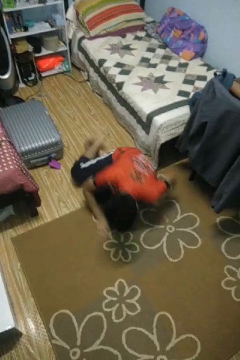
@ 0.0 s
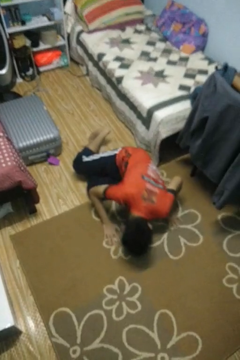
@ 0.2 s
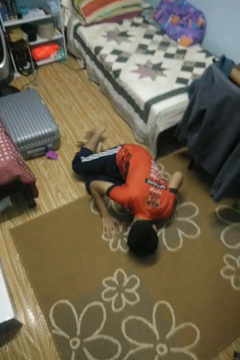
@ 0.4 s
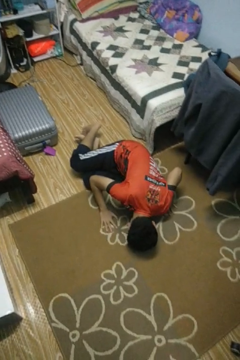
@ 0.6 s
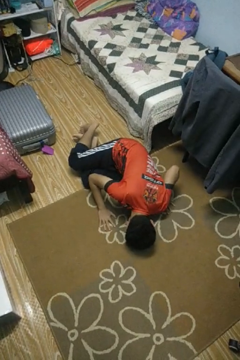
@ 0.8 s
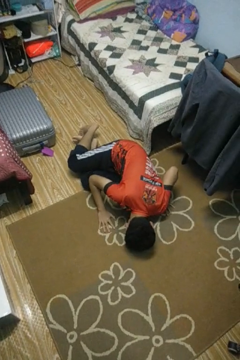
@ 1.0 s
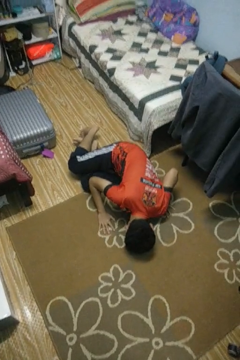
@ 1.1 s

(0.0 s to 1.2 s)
person lies down on floor

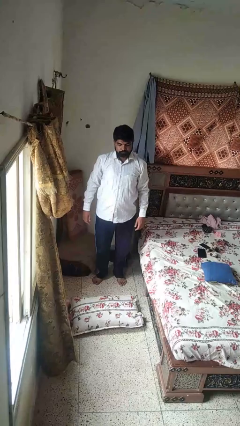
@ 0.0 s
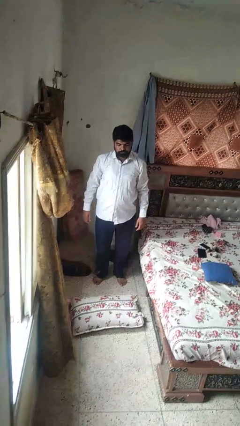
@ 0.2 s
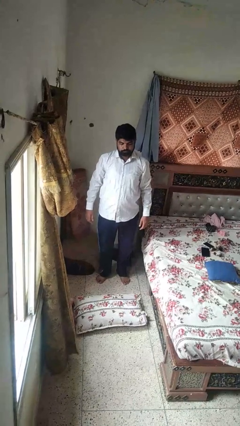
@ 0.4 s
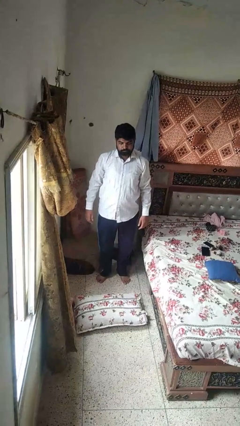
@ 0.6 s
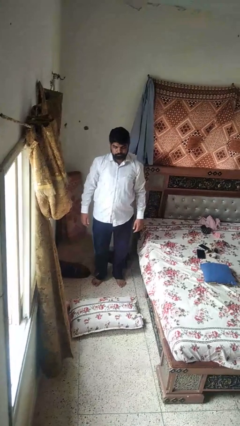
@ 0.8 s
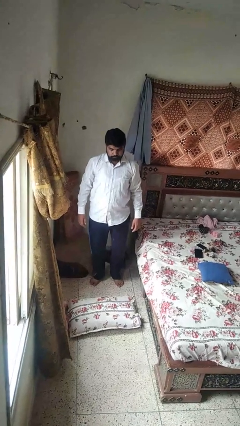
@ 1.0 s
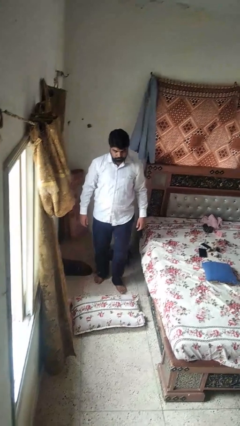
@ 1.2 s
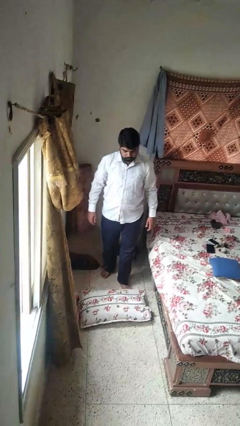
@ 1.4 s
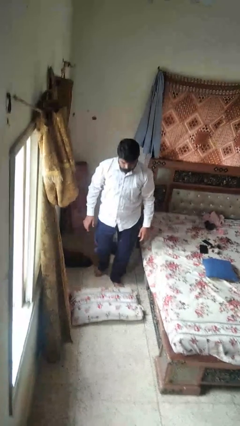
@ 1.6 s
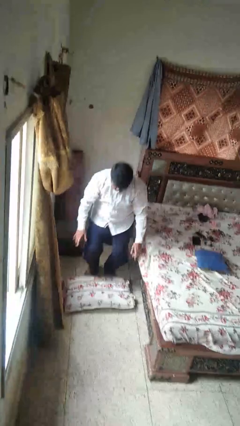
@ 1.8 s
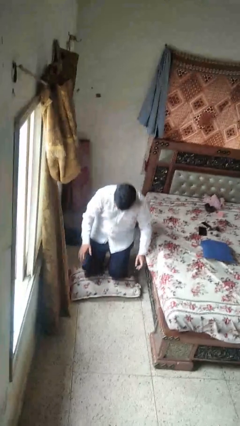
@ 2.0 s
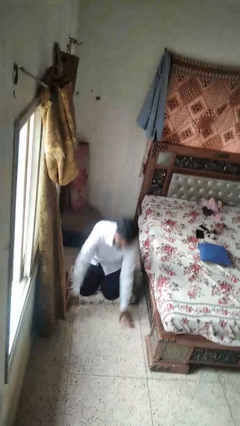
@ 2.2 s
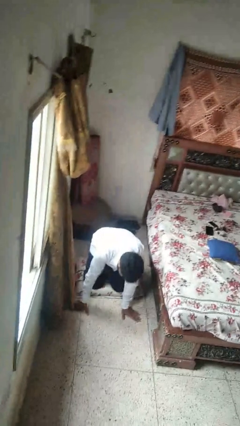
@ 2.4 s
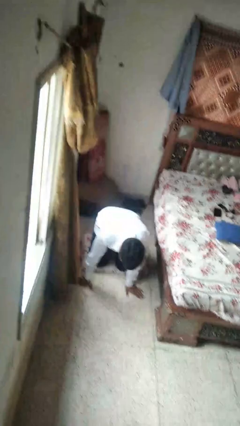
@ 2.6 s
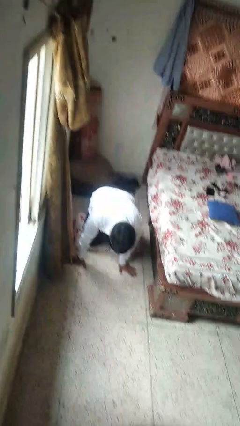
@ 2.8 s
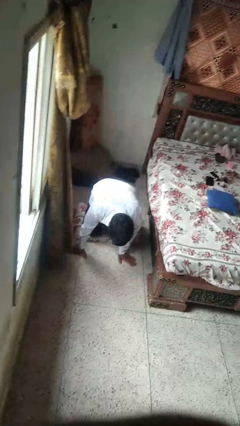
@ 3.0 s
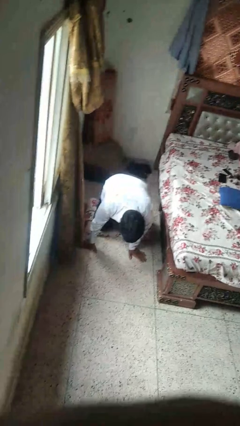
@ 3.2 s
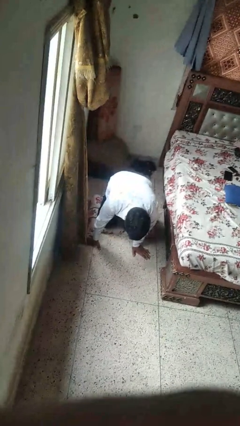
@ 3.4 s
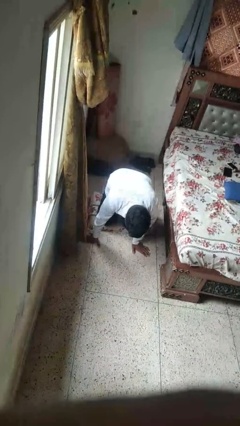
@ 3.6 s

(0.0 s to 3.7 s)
person trips on object on floor

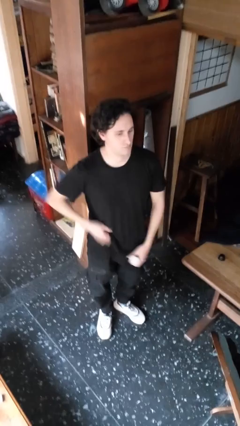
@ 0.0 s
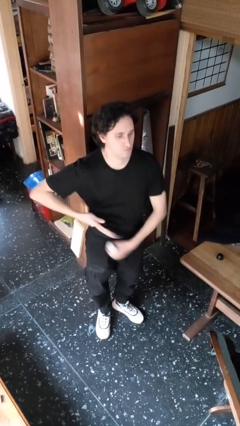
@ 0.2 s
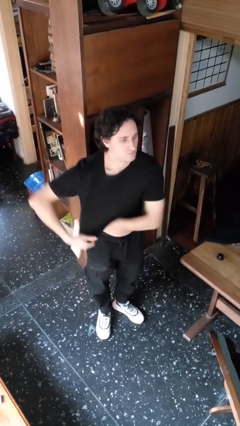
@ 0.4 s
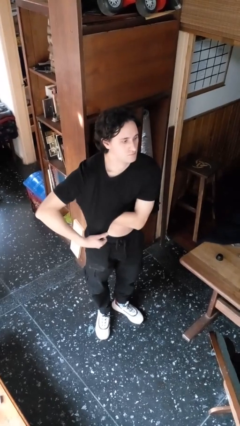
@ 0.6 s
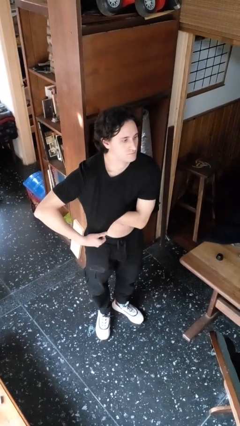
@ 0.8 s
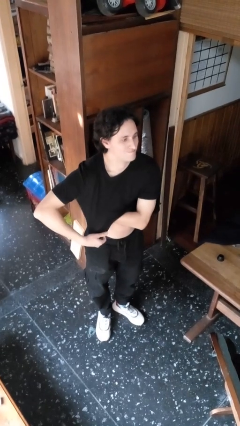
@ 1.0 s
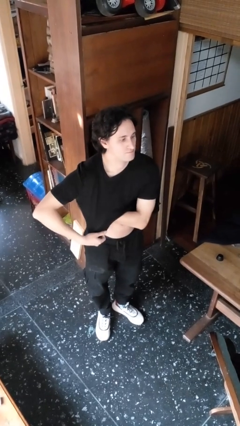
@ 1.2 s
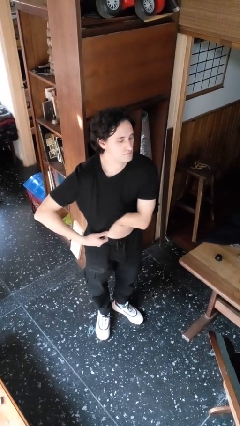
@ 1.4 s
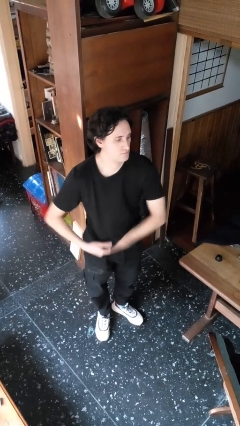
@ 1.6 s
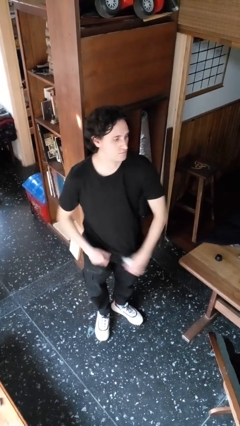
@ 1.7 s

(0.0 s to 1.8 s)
person applies deodorant

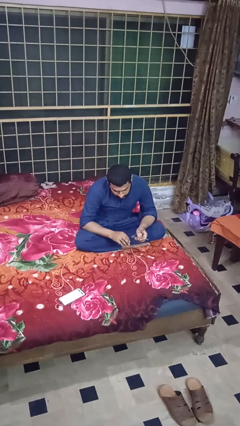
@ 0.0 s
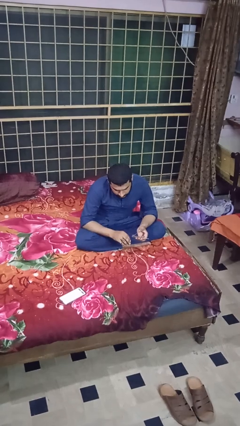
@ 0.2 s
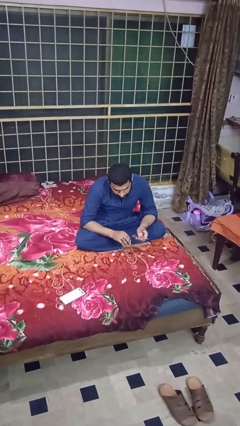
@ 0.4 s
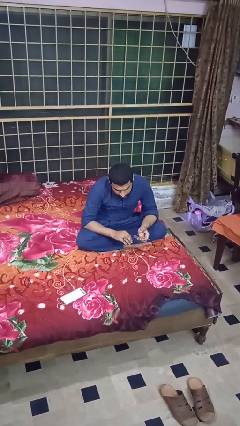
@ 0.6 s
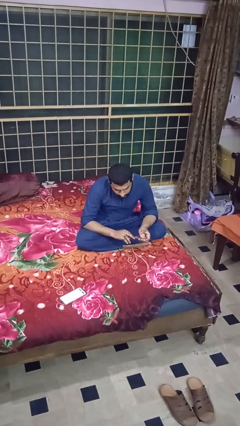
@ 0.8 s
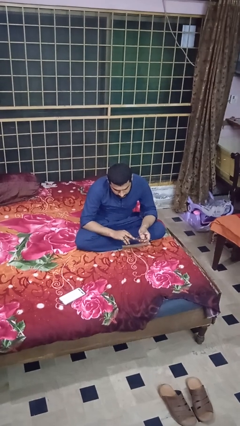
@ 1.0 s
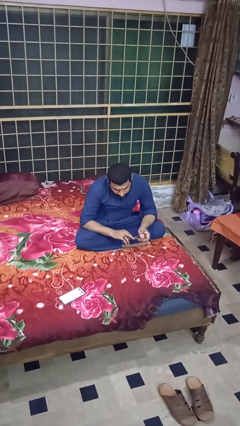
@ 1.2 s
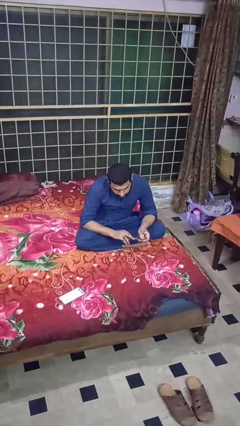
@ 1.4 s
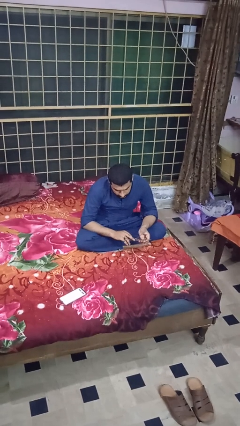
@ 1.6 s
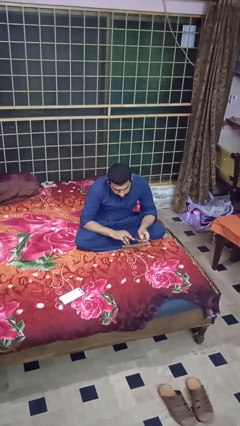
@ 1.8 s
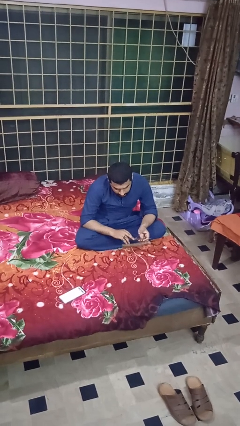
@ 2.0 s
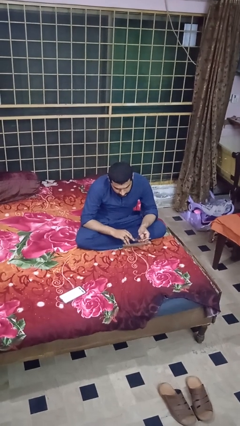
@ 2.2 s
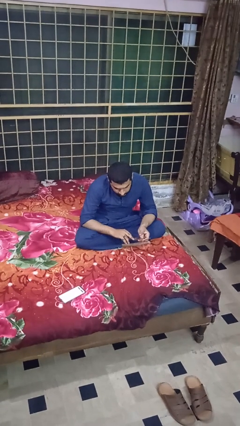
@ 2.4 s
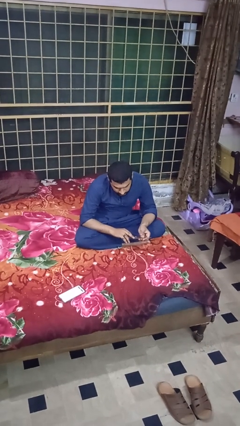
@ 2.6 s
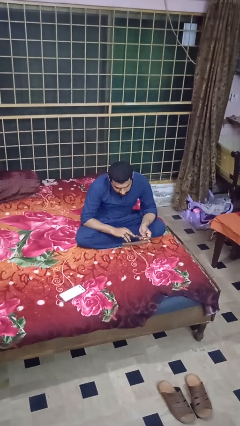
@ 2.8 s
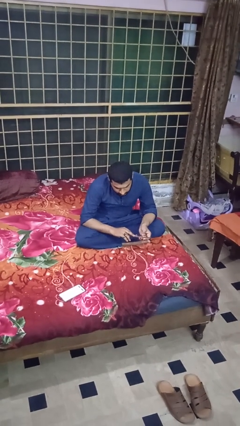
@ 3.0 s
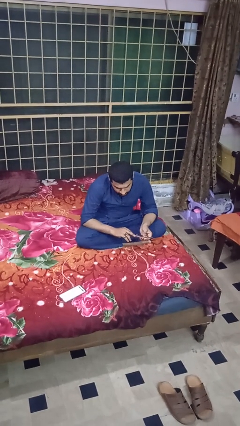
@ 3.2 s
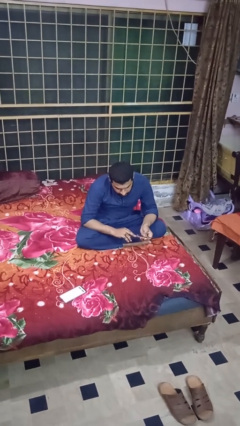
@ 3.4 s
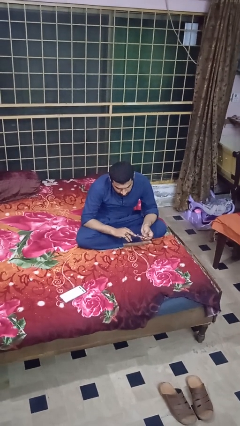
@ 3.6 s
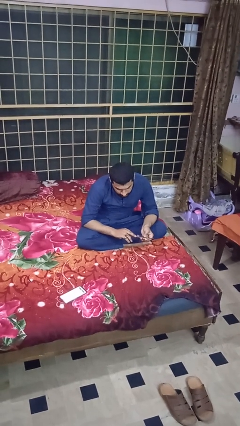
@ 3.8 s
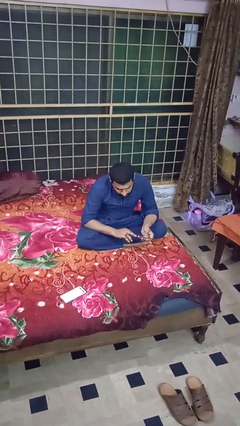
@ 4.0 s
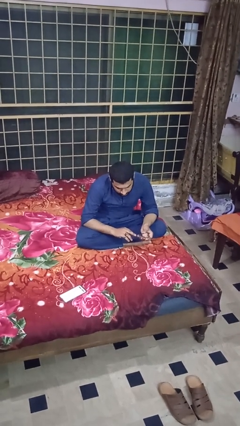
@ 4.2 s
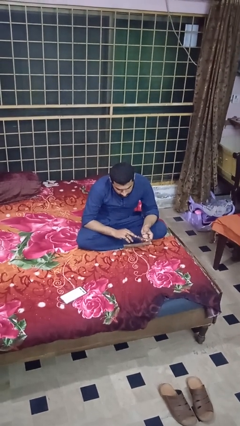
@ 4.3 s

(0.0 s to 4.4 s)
person clips fingernails

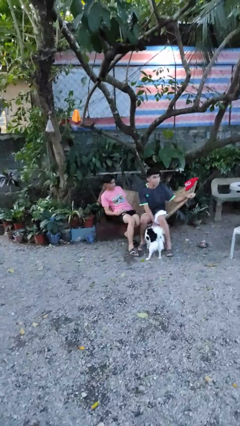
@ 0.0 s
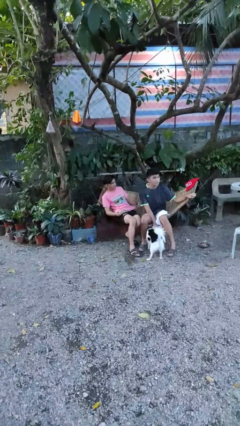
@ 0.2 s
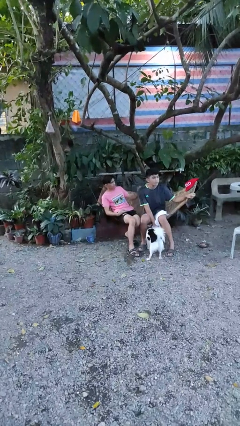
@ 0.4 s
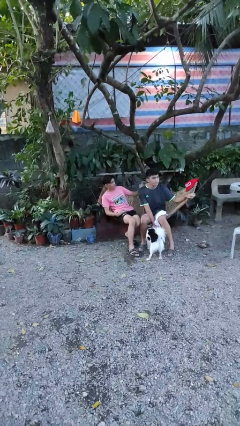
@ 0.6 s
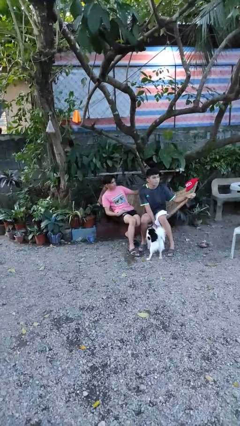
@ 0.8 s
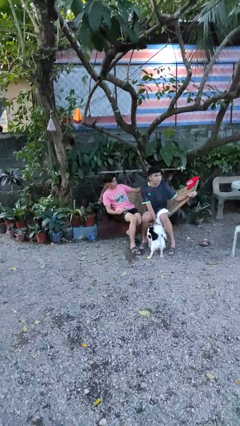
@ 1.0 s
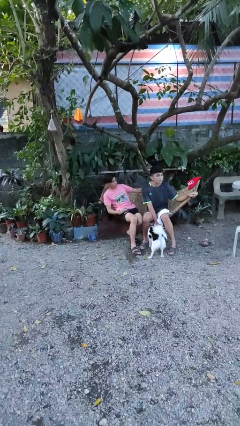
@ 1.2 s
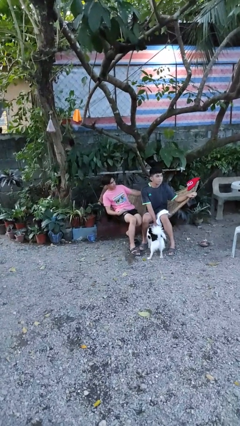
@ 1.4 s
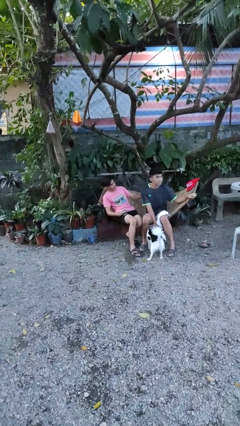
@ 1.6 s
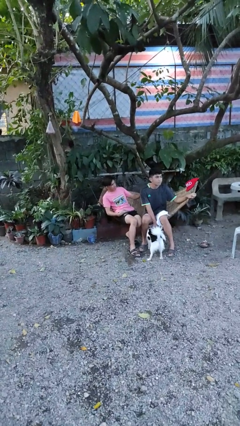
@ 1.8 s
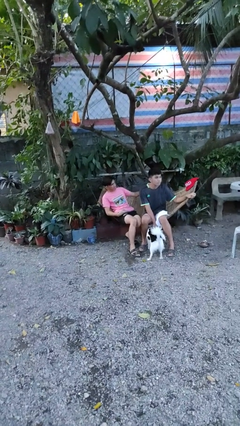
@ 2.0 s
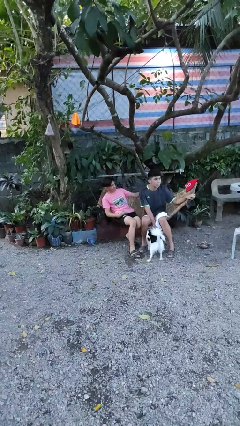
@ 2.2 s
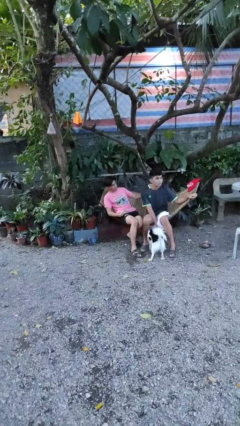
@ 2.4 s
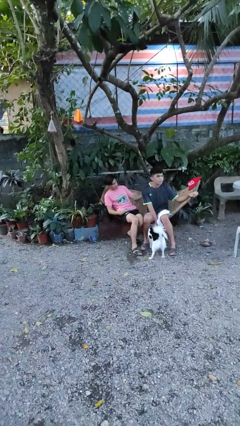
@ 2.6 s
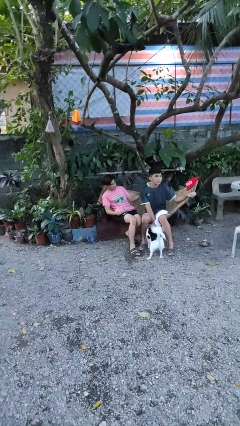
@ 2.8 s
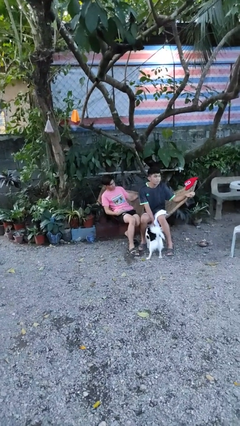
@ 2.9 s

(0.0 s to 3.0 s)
person touches back of person

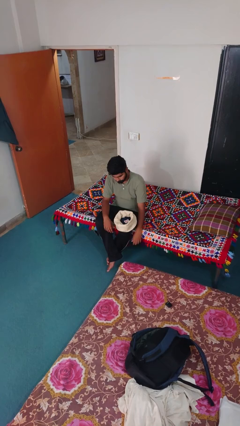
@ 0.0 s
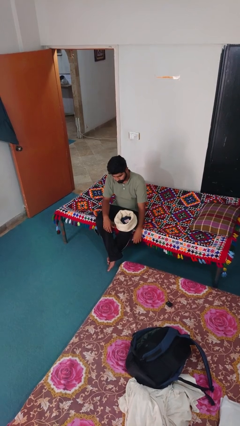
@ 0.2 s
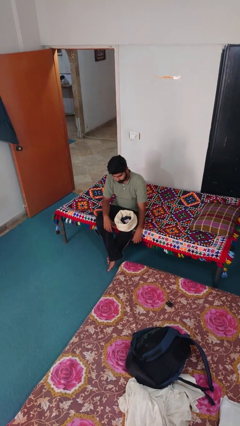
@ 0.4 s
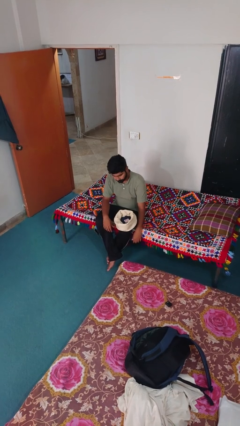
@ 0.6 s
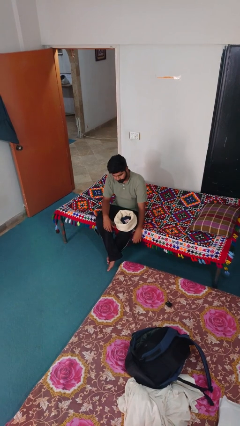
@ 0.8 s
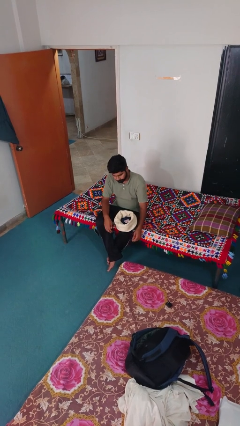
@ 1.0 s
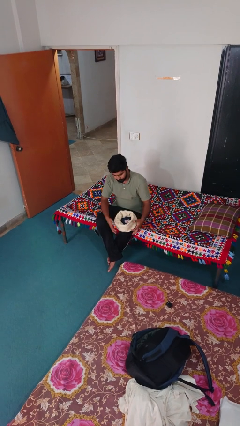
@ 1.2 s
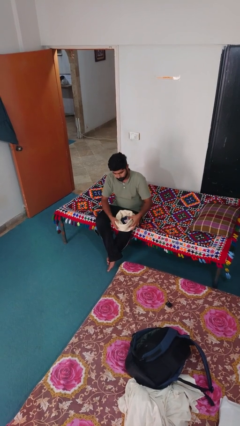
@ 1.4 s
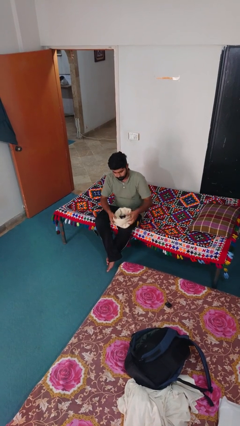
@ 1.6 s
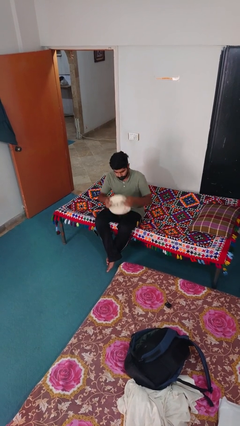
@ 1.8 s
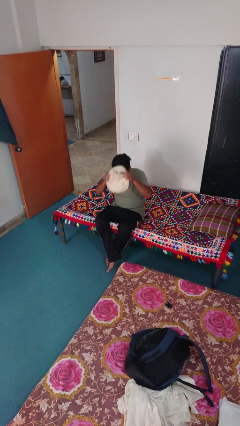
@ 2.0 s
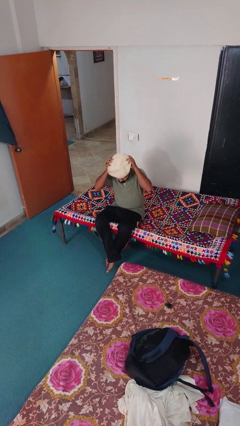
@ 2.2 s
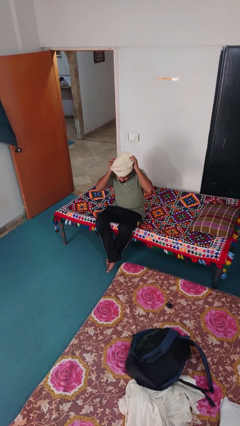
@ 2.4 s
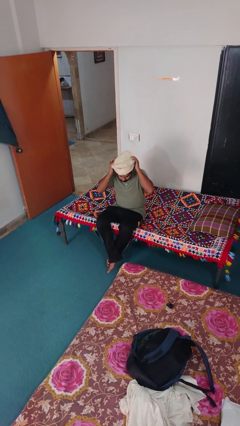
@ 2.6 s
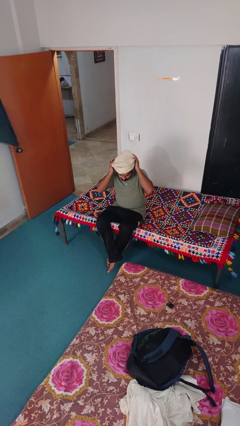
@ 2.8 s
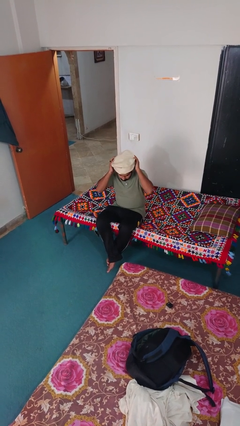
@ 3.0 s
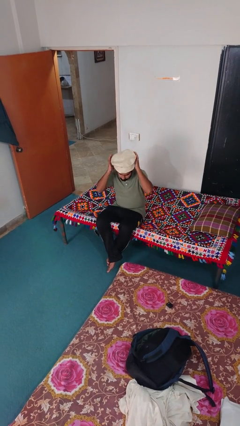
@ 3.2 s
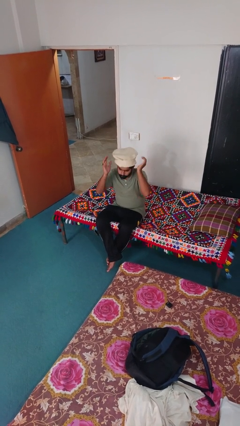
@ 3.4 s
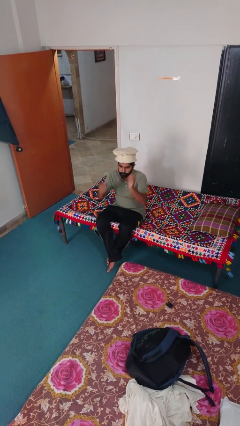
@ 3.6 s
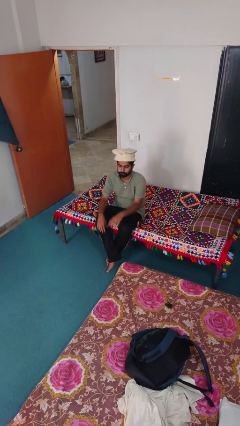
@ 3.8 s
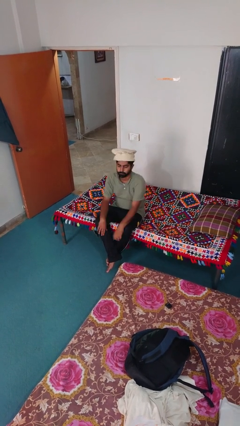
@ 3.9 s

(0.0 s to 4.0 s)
person puts on hat
